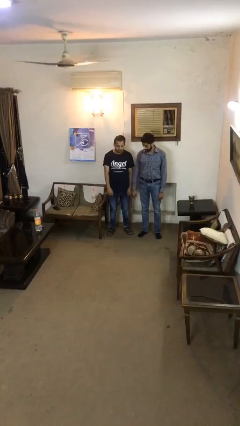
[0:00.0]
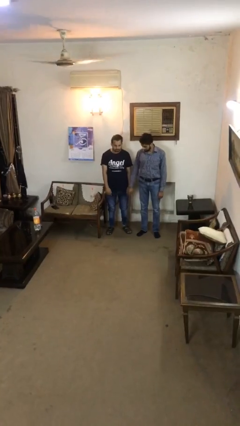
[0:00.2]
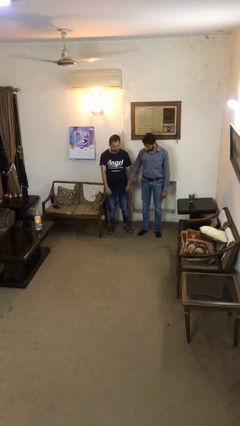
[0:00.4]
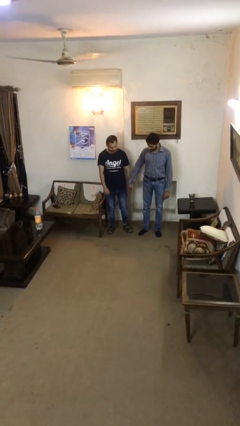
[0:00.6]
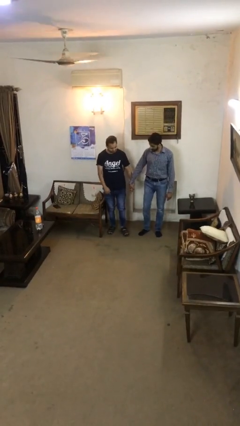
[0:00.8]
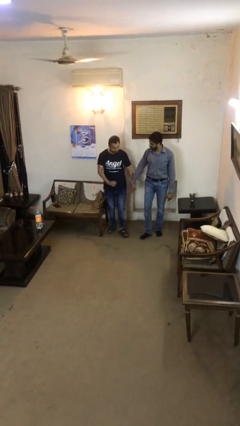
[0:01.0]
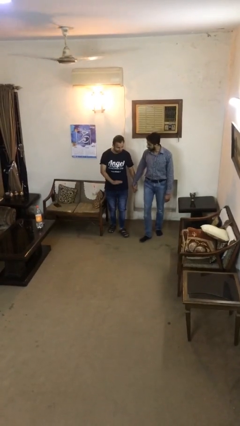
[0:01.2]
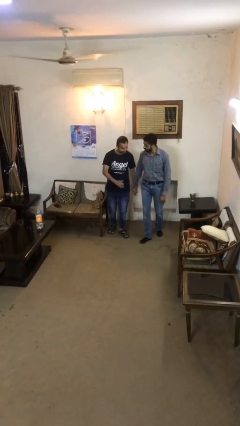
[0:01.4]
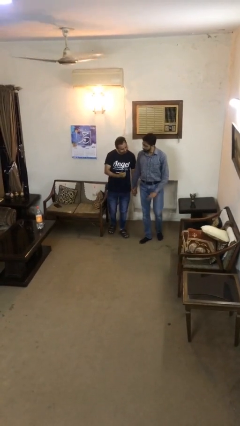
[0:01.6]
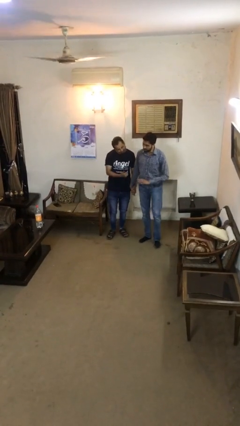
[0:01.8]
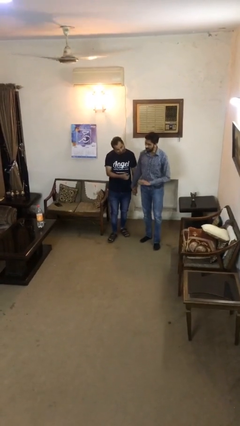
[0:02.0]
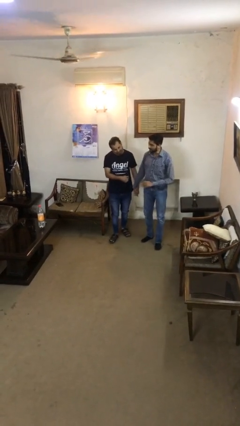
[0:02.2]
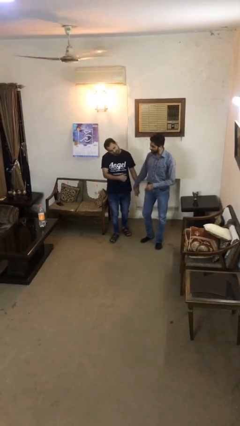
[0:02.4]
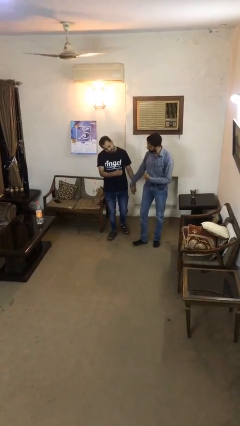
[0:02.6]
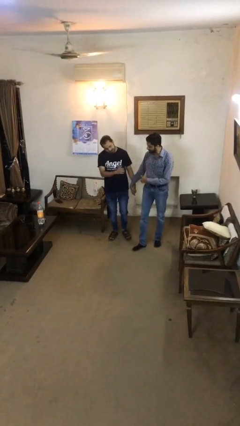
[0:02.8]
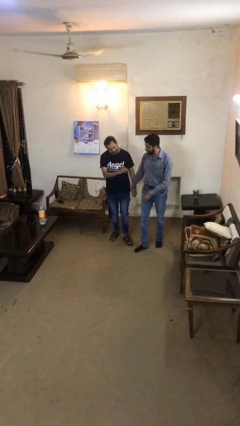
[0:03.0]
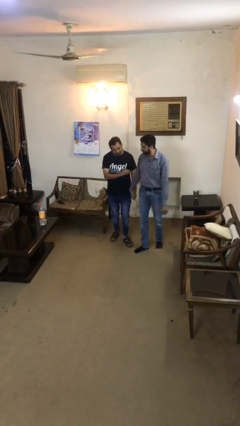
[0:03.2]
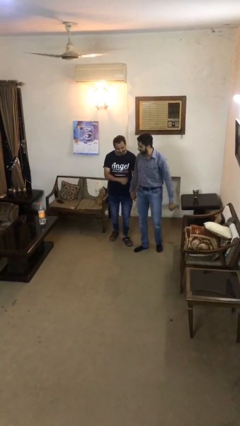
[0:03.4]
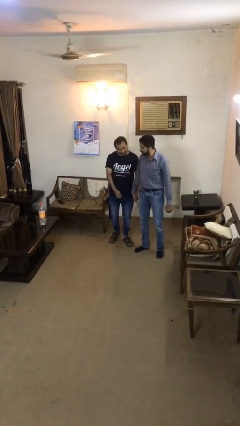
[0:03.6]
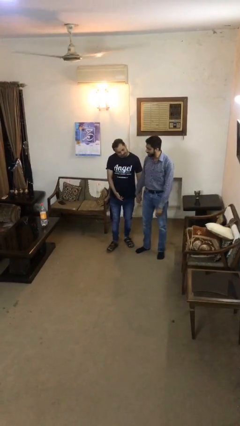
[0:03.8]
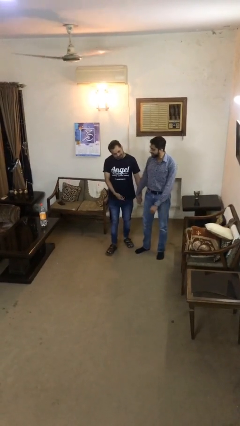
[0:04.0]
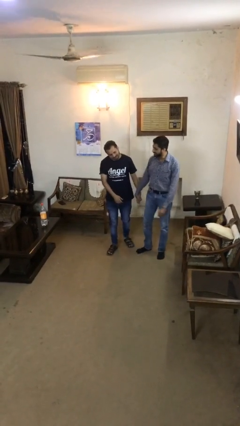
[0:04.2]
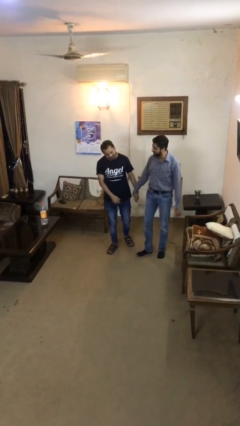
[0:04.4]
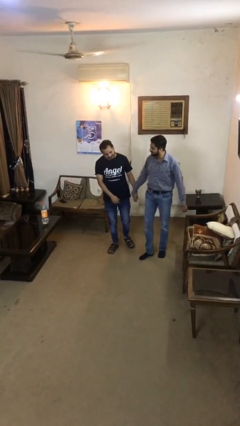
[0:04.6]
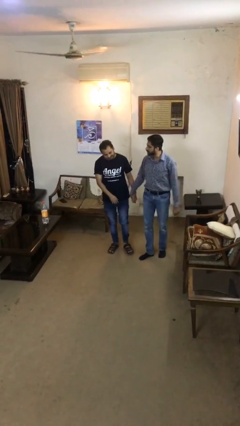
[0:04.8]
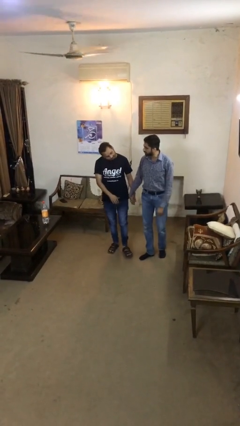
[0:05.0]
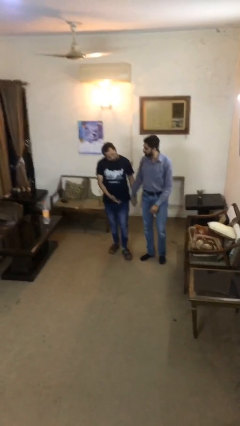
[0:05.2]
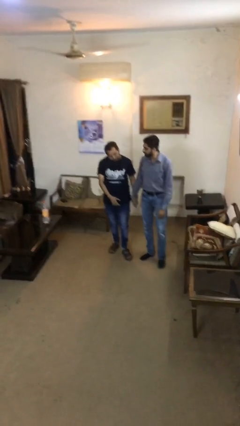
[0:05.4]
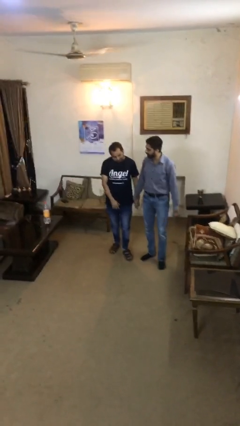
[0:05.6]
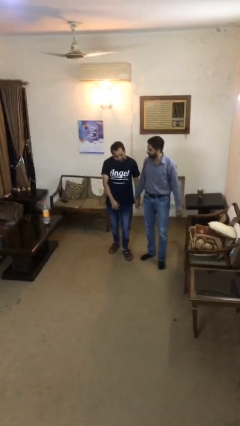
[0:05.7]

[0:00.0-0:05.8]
person holds hand

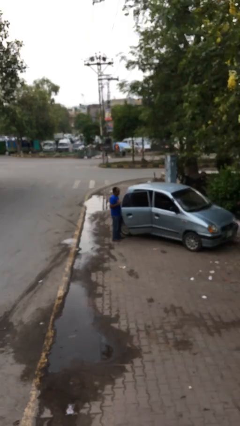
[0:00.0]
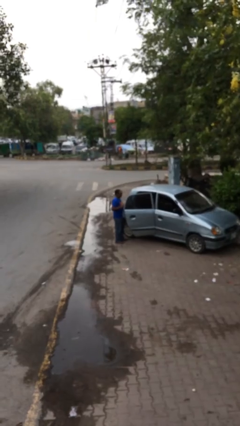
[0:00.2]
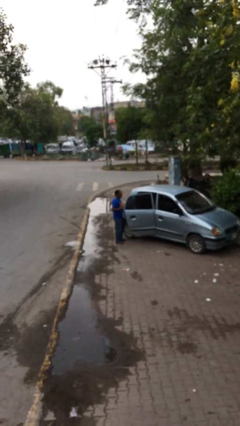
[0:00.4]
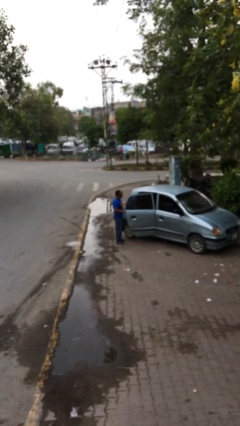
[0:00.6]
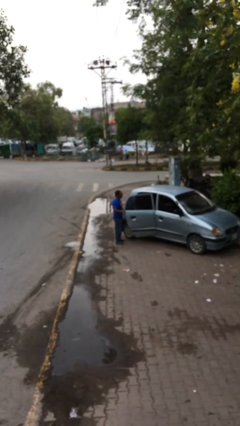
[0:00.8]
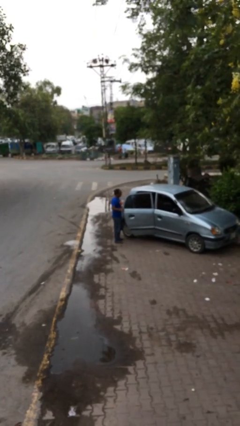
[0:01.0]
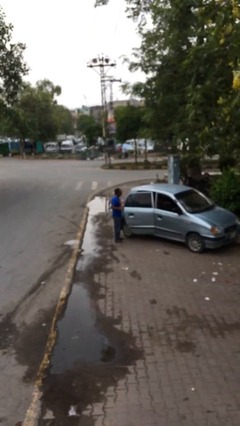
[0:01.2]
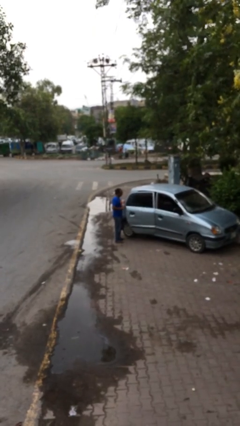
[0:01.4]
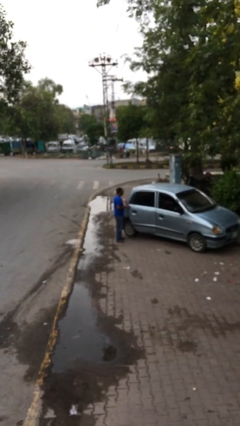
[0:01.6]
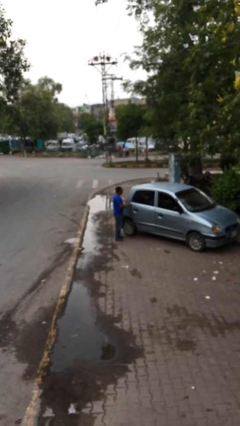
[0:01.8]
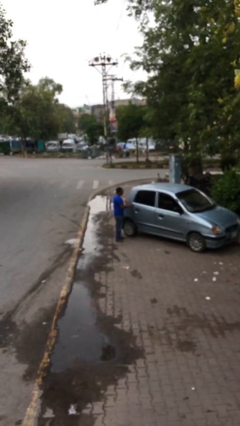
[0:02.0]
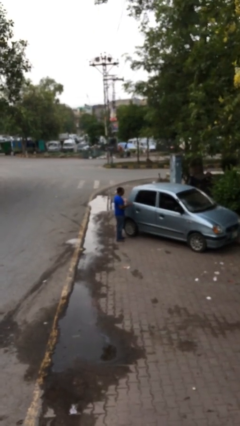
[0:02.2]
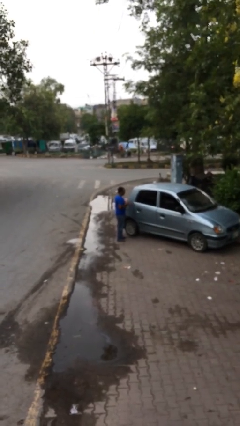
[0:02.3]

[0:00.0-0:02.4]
person closes car door

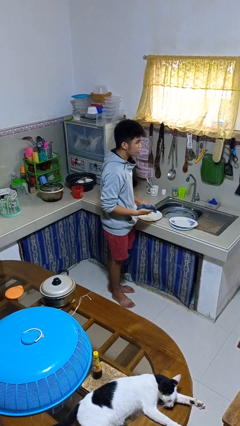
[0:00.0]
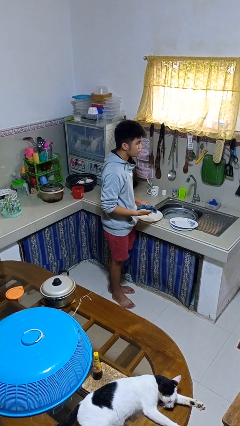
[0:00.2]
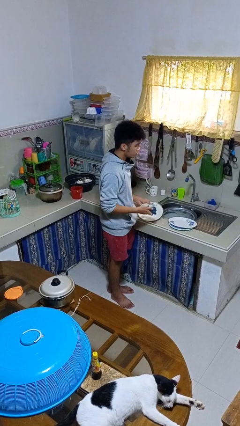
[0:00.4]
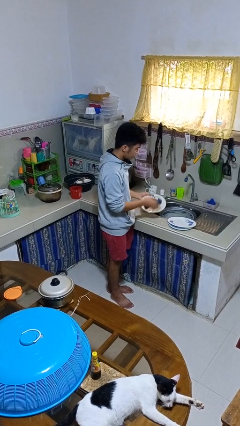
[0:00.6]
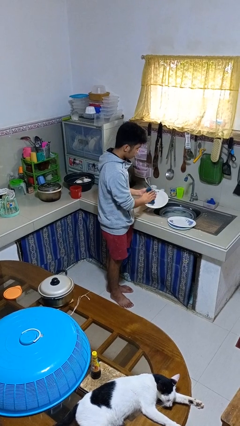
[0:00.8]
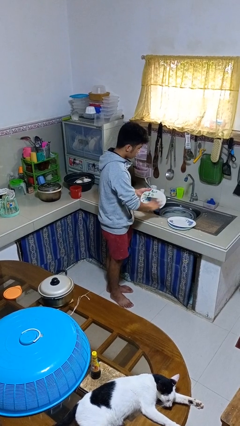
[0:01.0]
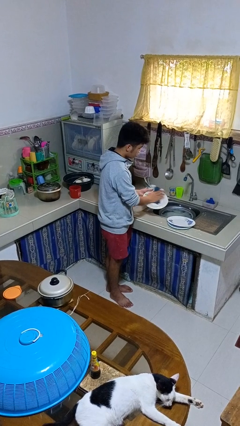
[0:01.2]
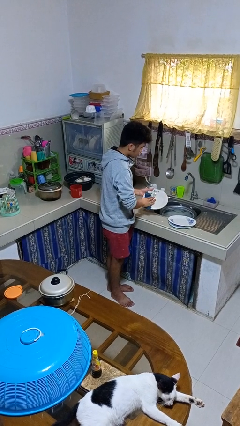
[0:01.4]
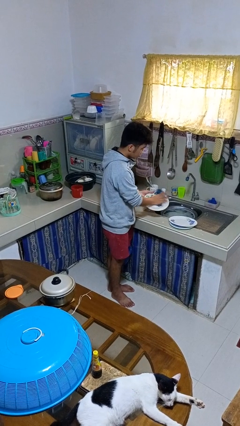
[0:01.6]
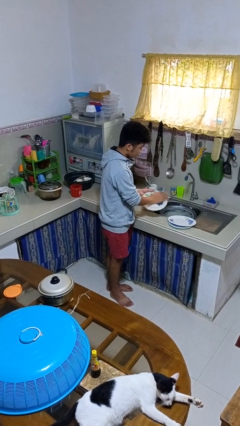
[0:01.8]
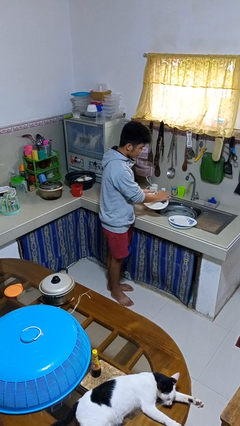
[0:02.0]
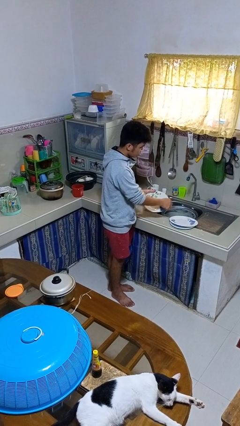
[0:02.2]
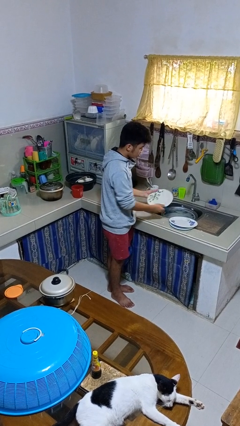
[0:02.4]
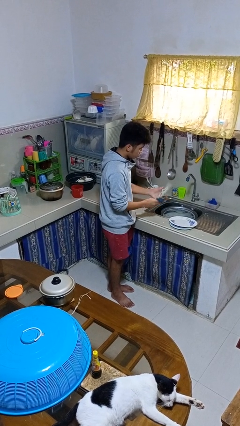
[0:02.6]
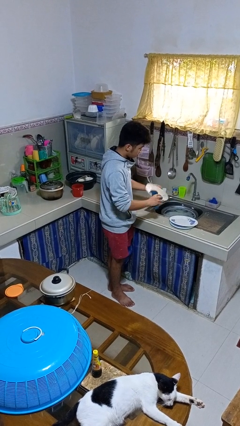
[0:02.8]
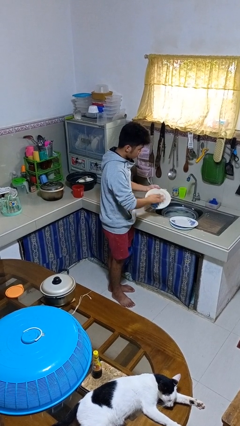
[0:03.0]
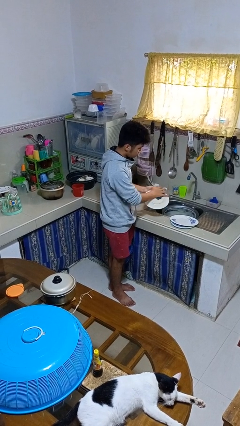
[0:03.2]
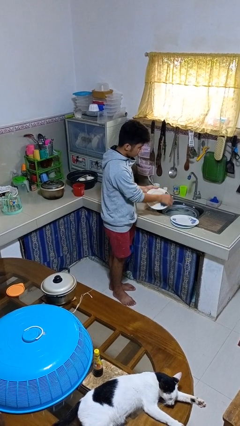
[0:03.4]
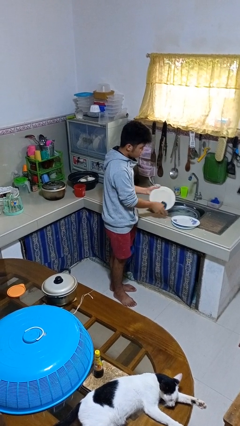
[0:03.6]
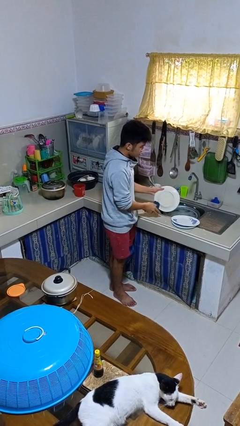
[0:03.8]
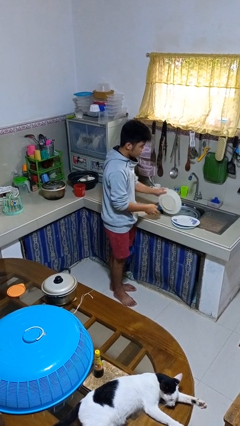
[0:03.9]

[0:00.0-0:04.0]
person dries dish

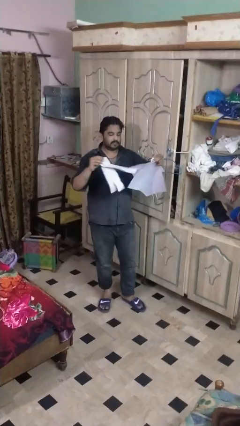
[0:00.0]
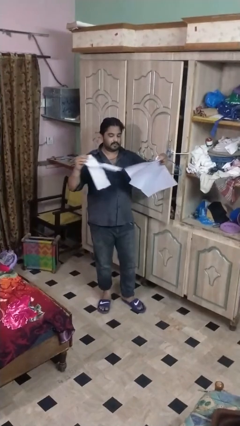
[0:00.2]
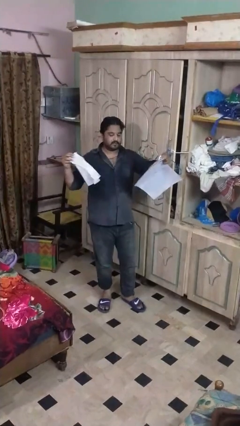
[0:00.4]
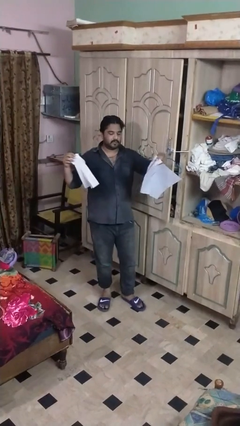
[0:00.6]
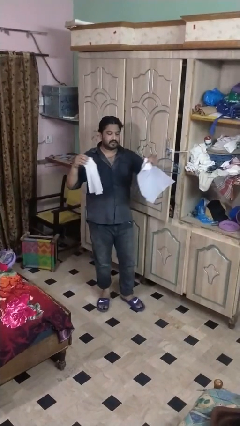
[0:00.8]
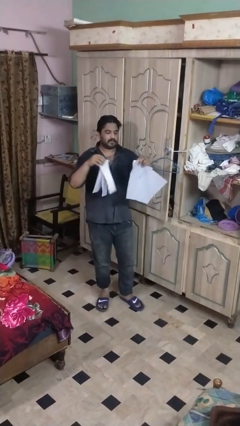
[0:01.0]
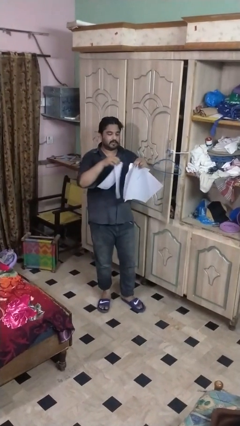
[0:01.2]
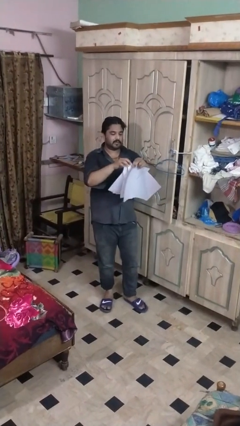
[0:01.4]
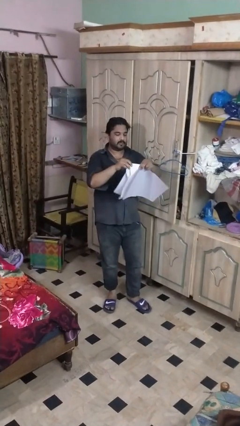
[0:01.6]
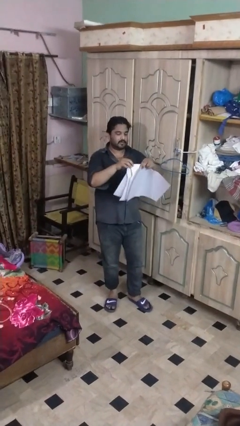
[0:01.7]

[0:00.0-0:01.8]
person tears paper

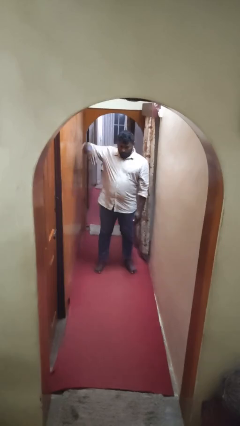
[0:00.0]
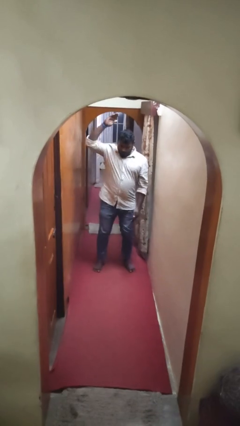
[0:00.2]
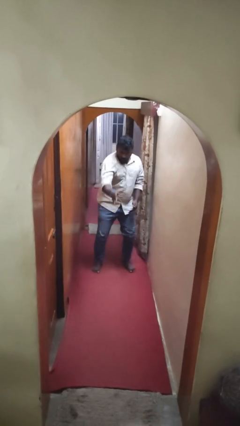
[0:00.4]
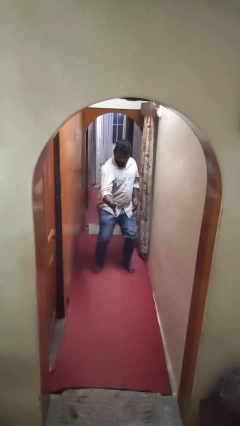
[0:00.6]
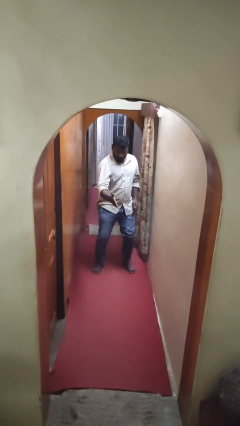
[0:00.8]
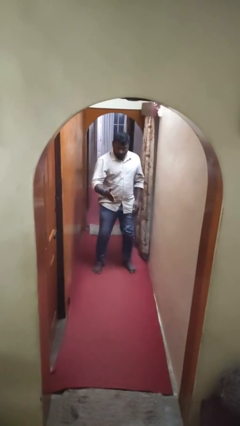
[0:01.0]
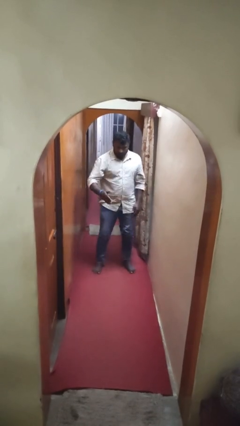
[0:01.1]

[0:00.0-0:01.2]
person karate chop

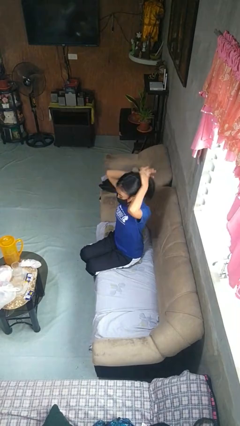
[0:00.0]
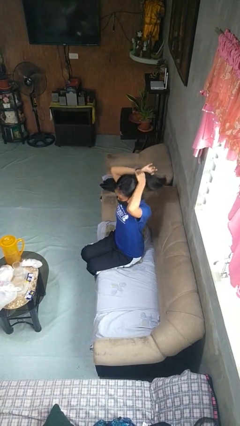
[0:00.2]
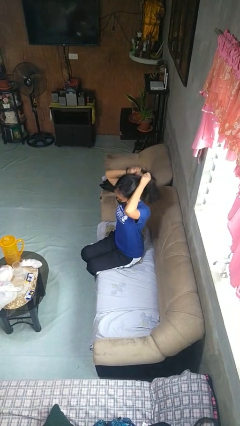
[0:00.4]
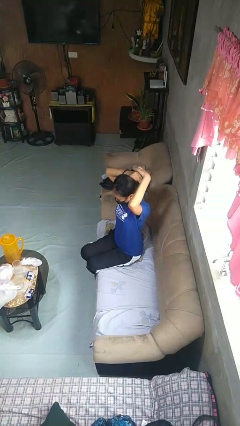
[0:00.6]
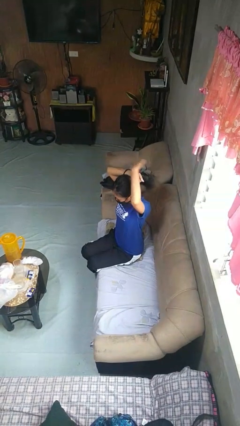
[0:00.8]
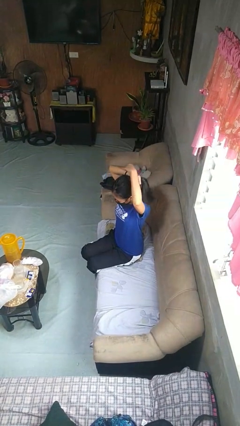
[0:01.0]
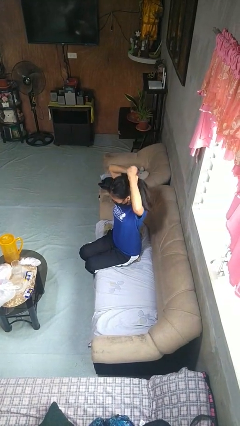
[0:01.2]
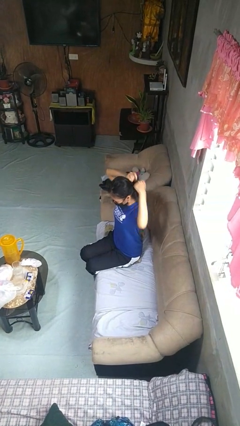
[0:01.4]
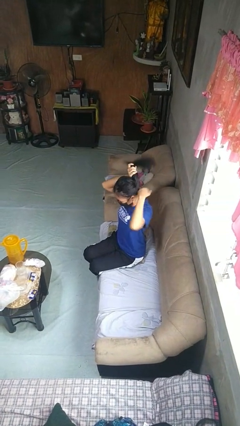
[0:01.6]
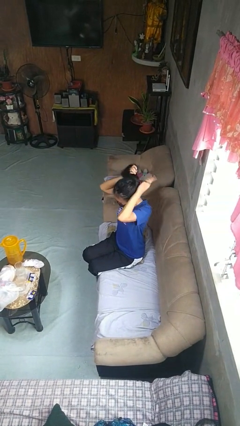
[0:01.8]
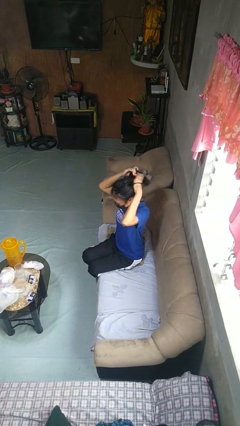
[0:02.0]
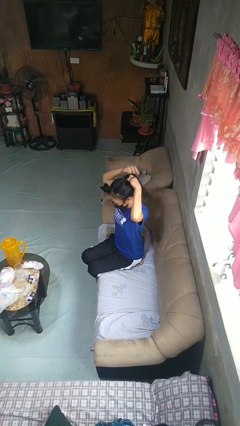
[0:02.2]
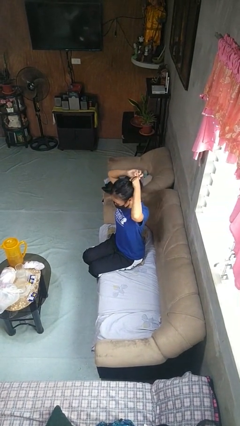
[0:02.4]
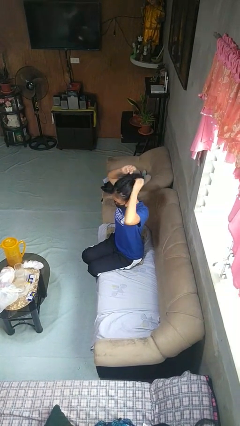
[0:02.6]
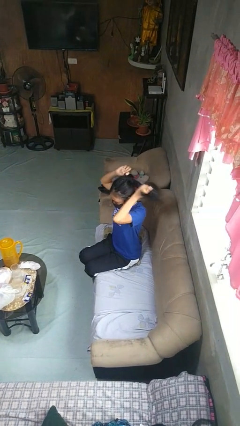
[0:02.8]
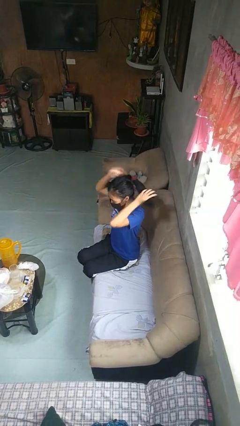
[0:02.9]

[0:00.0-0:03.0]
person puts hair in ponytail
